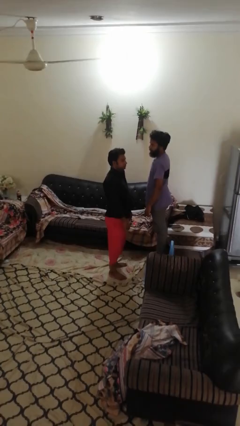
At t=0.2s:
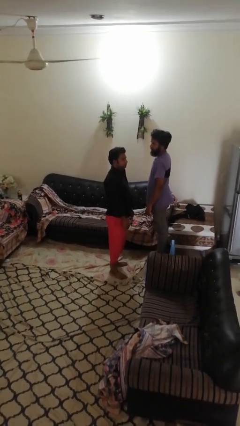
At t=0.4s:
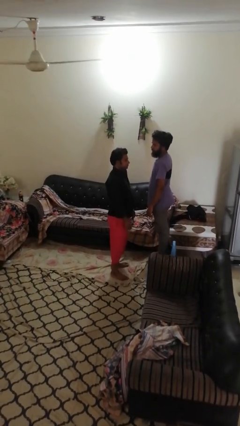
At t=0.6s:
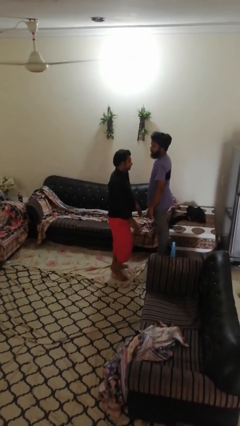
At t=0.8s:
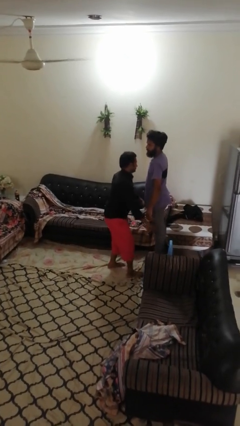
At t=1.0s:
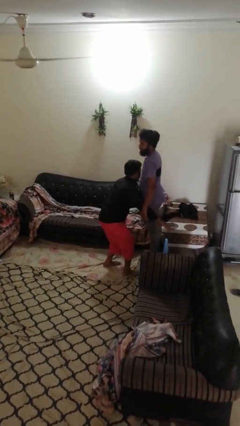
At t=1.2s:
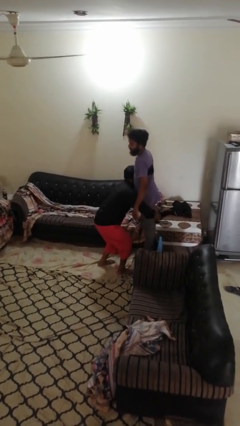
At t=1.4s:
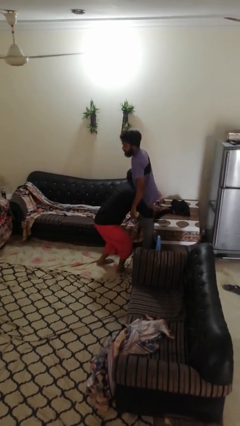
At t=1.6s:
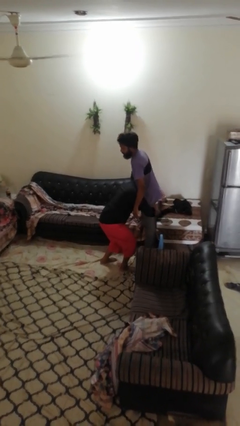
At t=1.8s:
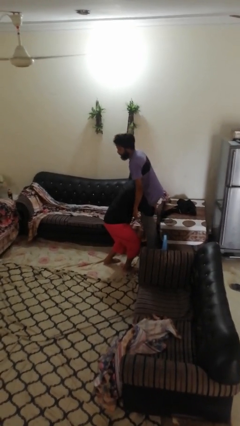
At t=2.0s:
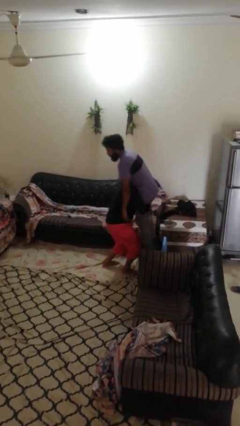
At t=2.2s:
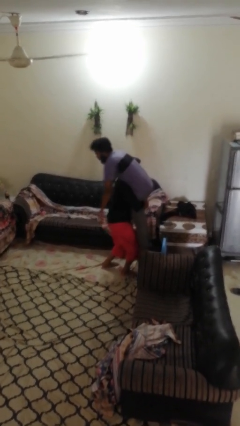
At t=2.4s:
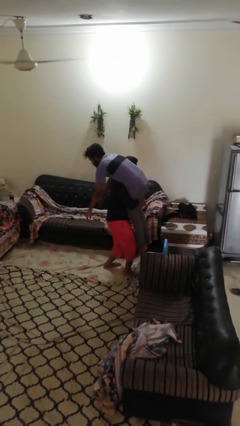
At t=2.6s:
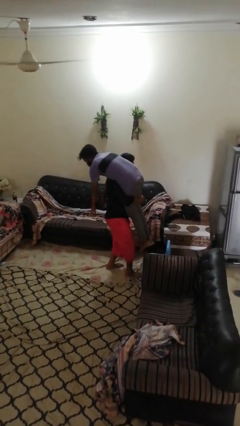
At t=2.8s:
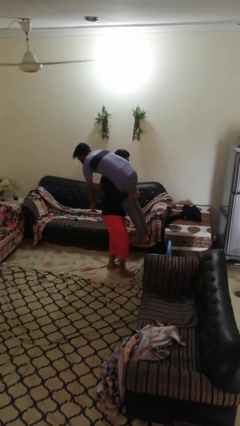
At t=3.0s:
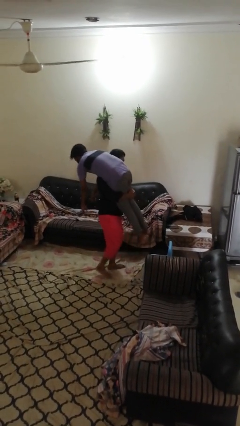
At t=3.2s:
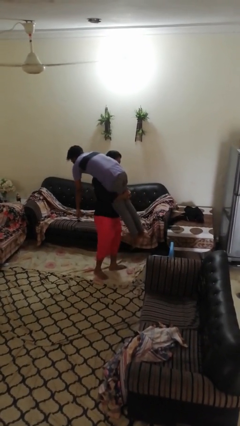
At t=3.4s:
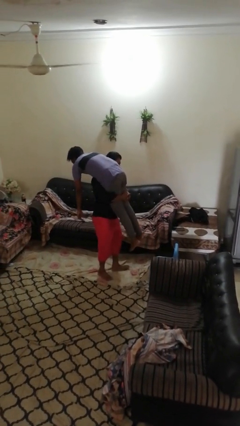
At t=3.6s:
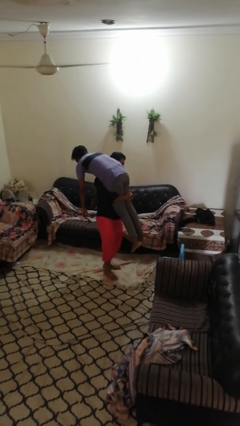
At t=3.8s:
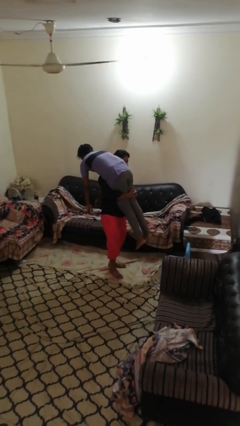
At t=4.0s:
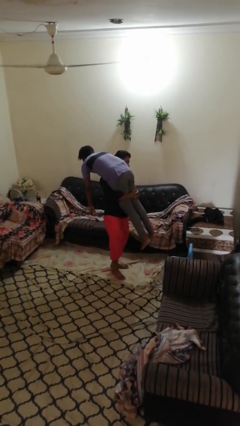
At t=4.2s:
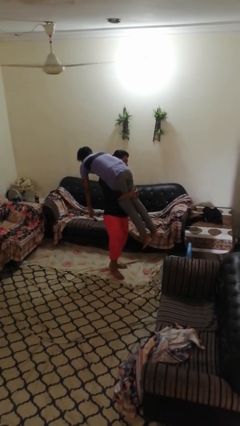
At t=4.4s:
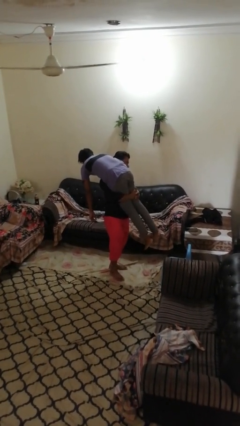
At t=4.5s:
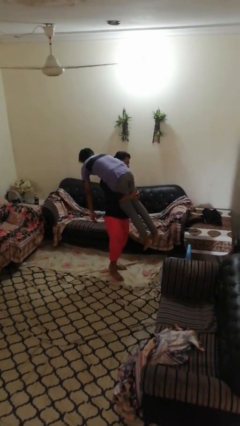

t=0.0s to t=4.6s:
person carries person over shoulder

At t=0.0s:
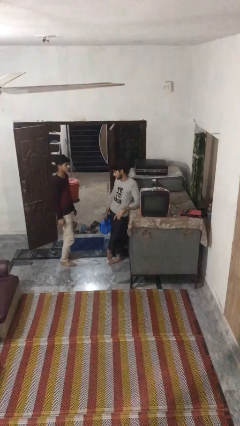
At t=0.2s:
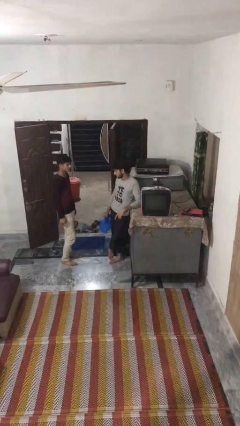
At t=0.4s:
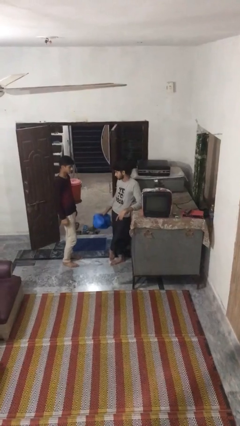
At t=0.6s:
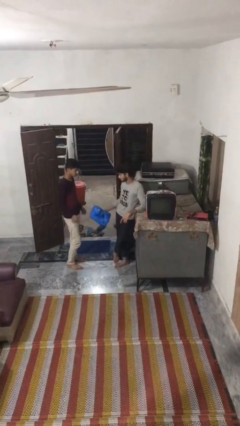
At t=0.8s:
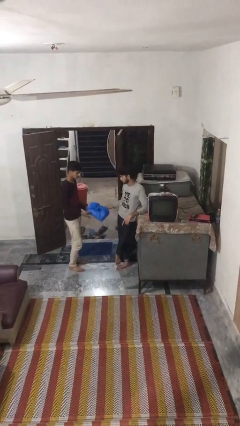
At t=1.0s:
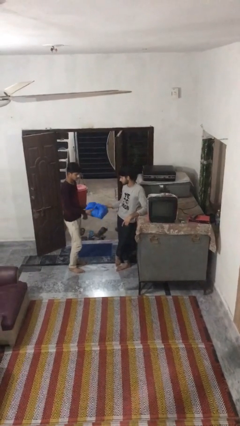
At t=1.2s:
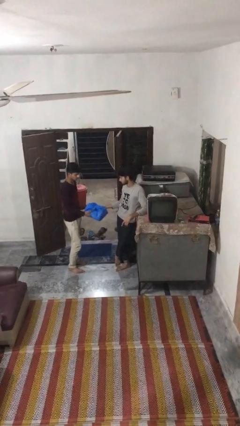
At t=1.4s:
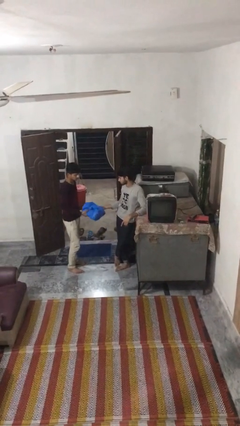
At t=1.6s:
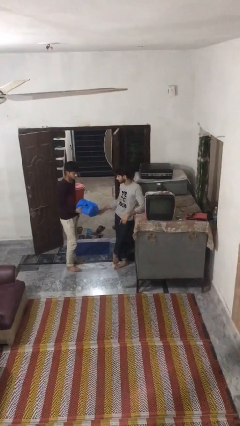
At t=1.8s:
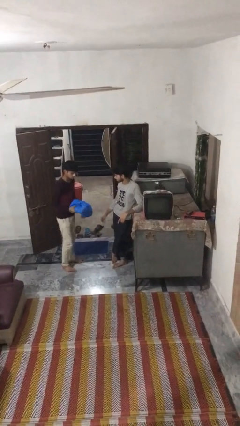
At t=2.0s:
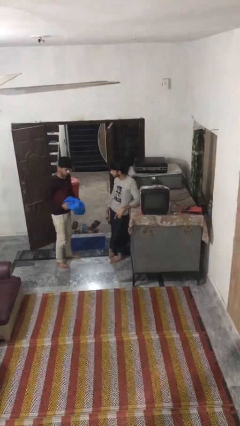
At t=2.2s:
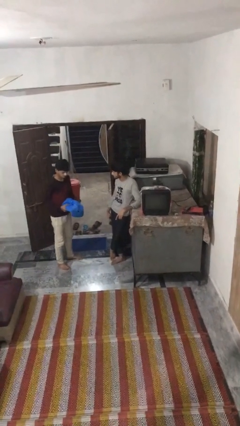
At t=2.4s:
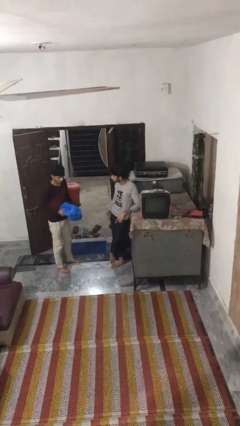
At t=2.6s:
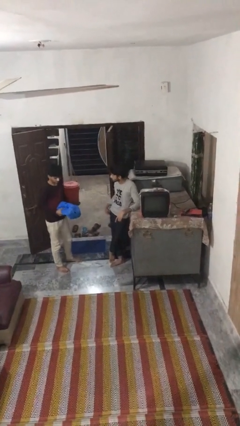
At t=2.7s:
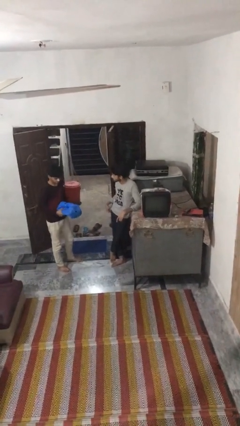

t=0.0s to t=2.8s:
person transfers object to person

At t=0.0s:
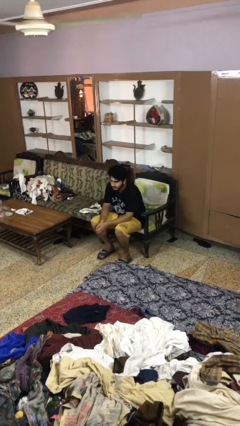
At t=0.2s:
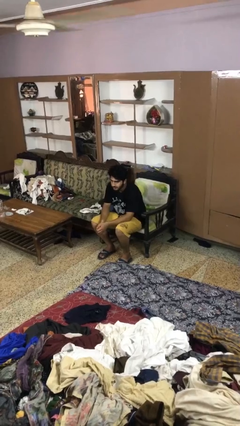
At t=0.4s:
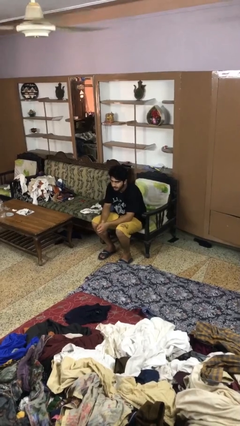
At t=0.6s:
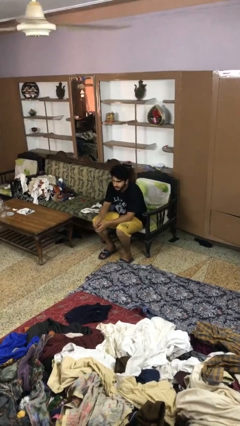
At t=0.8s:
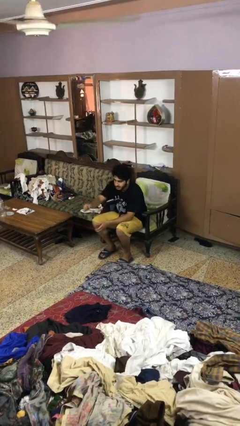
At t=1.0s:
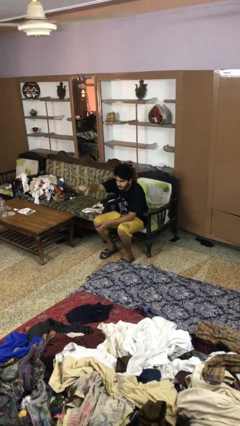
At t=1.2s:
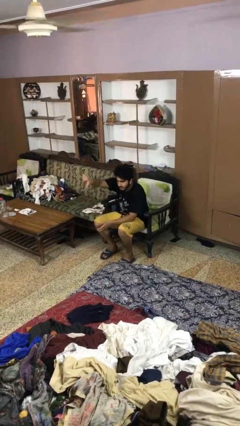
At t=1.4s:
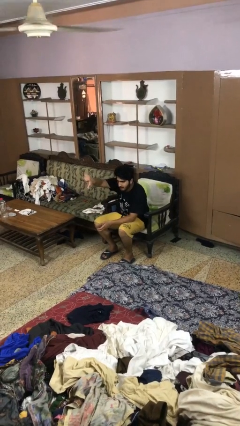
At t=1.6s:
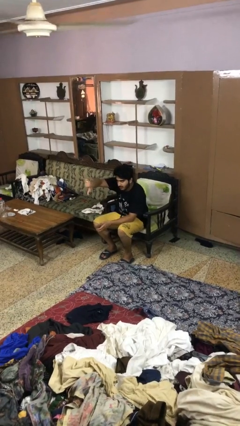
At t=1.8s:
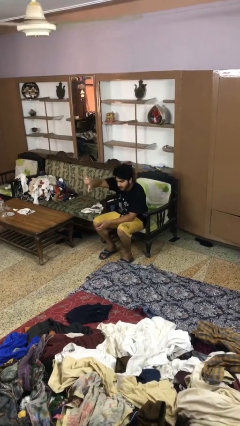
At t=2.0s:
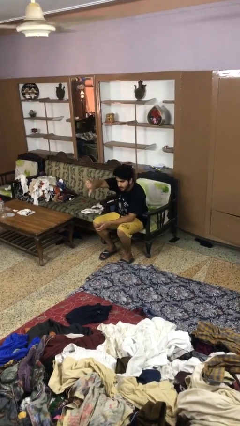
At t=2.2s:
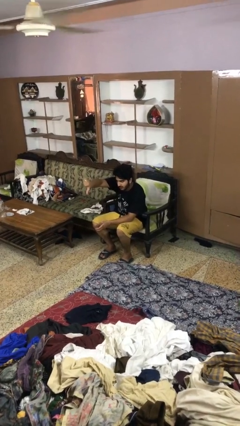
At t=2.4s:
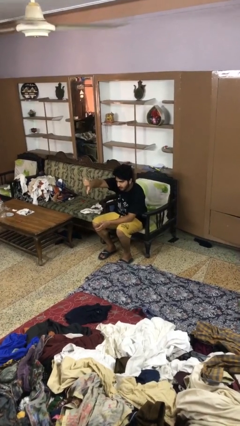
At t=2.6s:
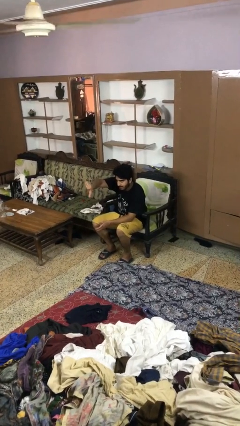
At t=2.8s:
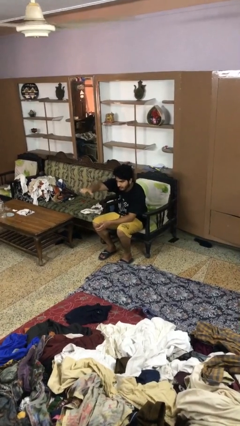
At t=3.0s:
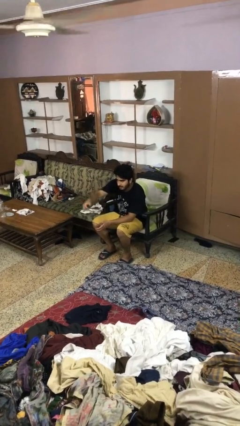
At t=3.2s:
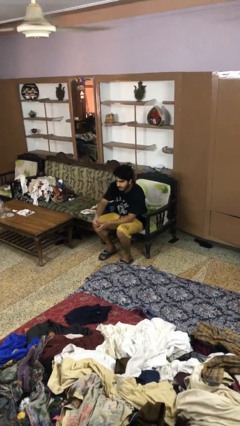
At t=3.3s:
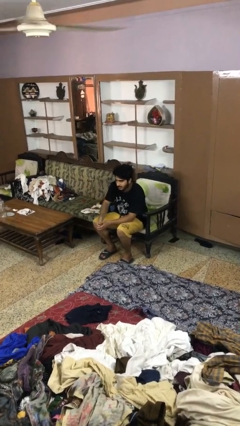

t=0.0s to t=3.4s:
person gestures thumbs down

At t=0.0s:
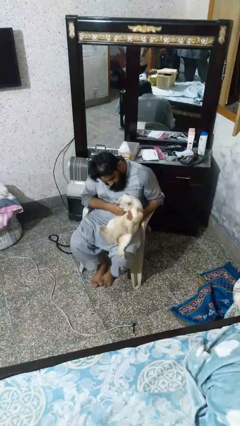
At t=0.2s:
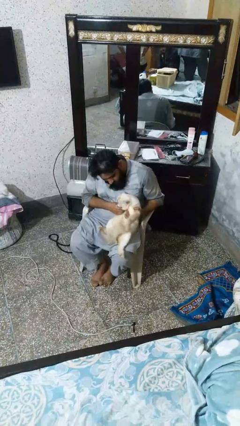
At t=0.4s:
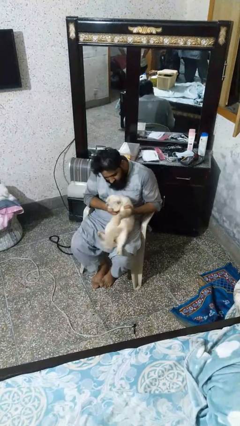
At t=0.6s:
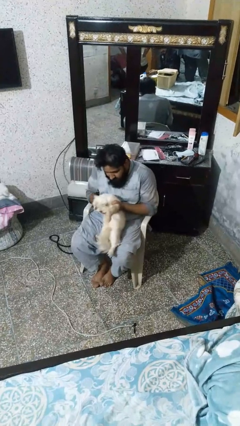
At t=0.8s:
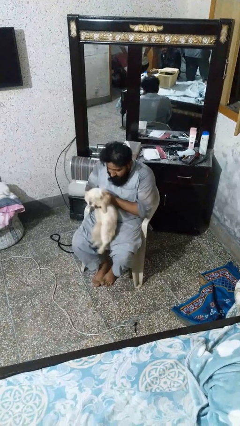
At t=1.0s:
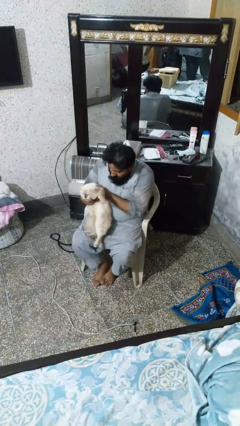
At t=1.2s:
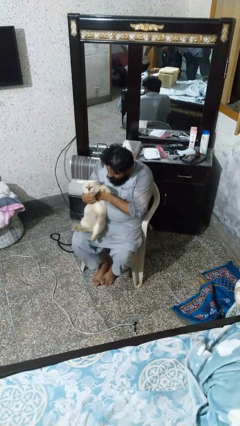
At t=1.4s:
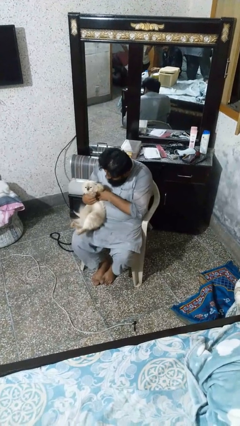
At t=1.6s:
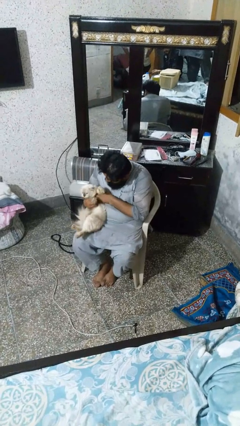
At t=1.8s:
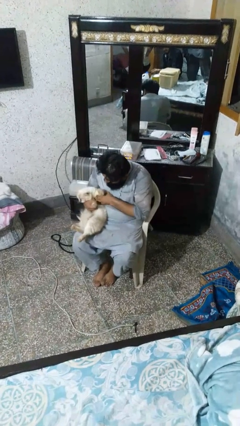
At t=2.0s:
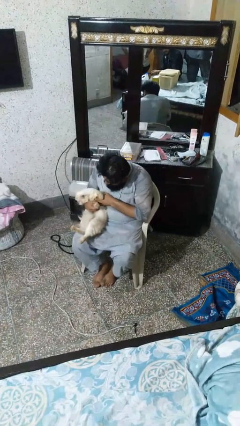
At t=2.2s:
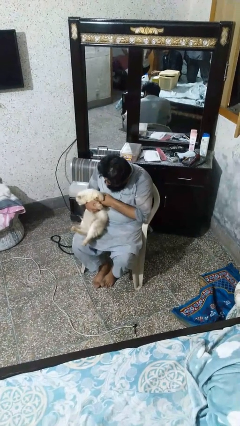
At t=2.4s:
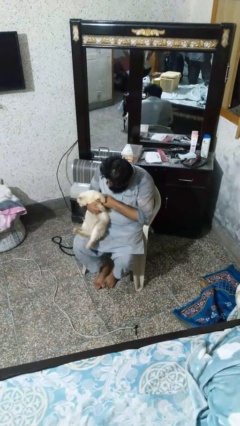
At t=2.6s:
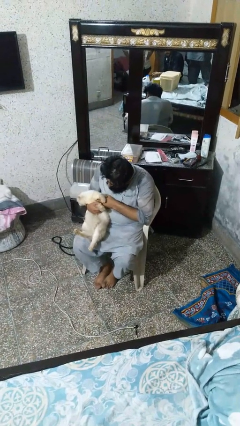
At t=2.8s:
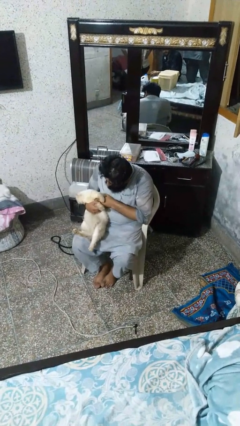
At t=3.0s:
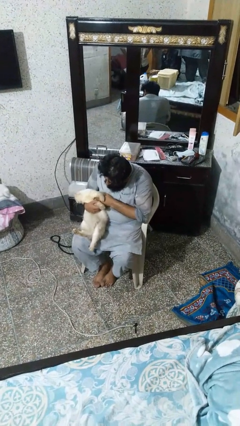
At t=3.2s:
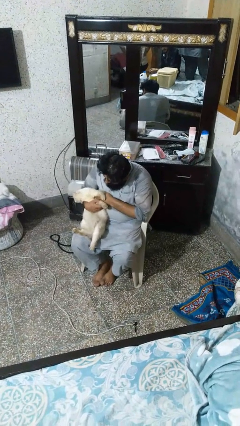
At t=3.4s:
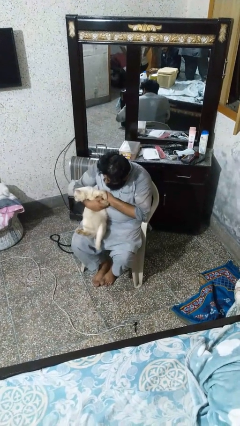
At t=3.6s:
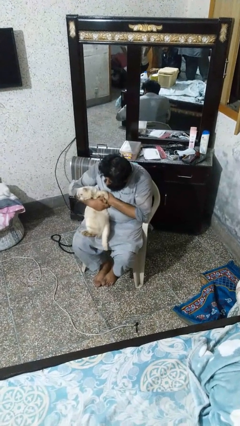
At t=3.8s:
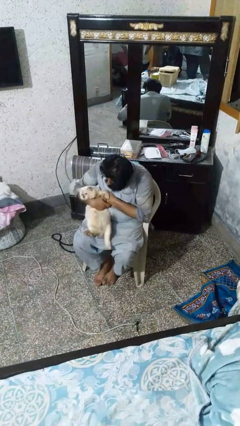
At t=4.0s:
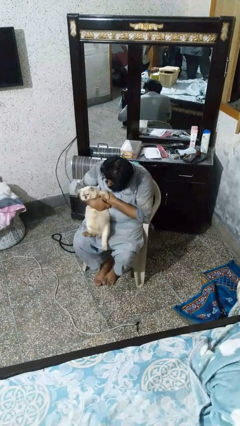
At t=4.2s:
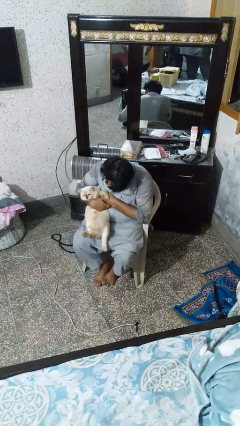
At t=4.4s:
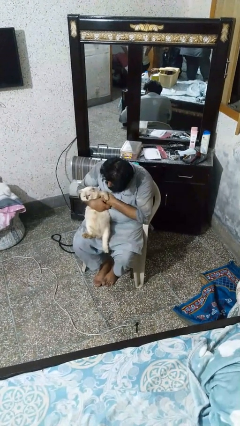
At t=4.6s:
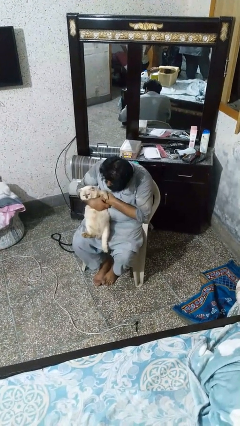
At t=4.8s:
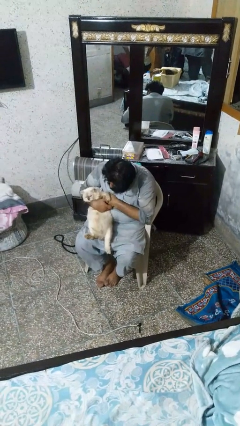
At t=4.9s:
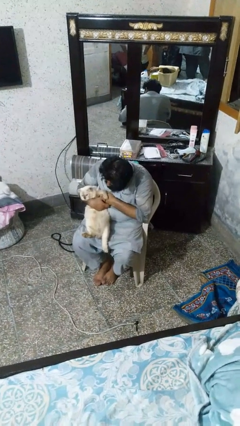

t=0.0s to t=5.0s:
person pets cat

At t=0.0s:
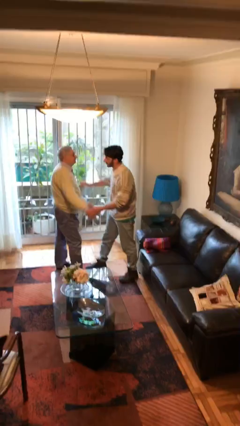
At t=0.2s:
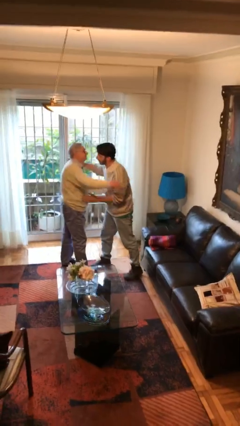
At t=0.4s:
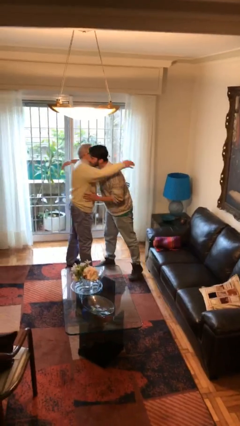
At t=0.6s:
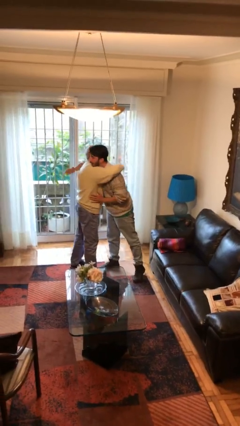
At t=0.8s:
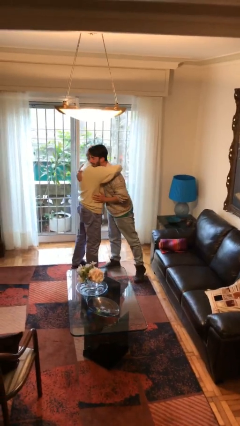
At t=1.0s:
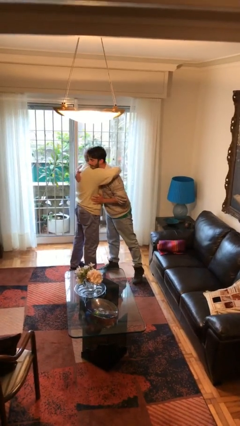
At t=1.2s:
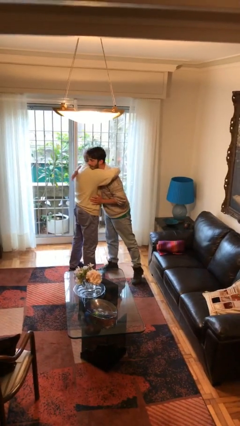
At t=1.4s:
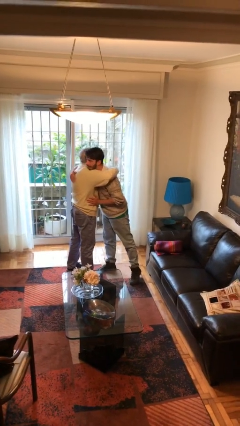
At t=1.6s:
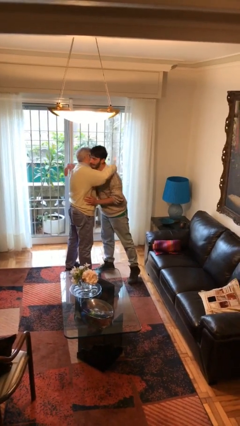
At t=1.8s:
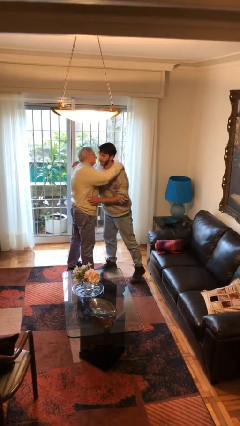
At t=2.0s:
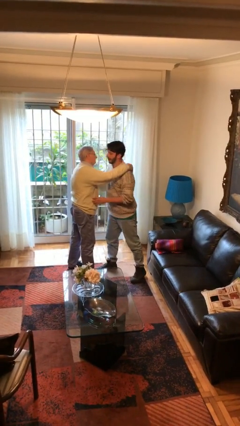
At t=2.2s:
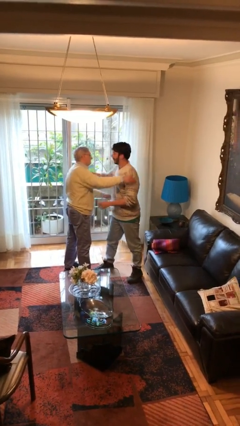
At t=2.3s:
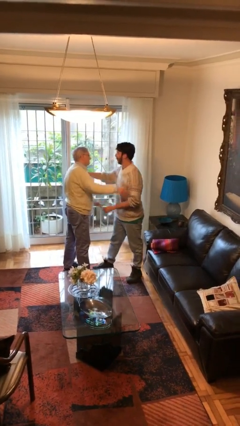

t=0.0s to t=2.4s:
person embraces person
